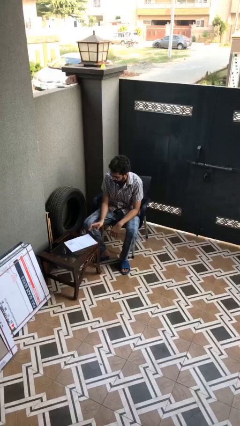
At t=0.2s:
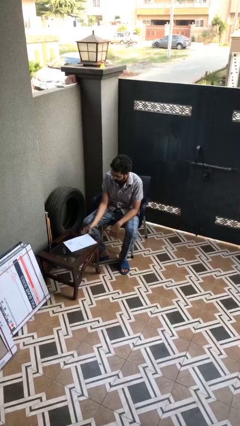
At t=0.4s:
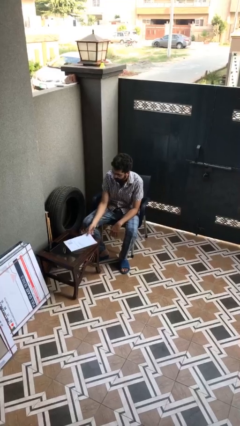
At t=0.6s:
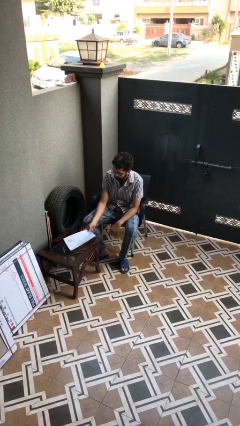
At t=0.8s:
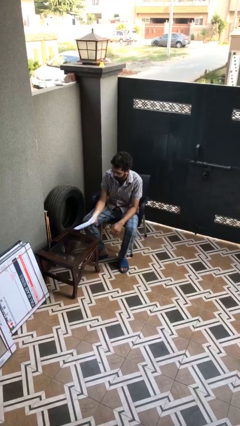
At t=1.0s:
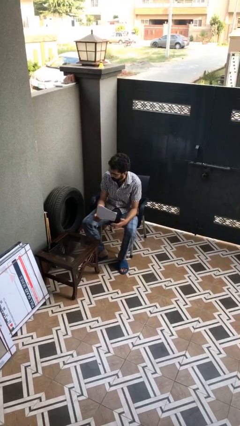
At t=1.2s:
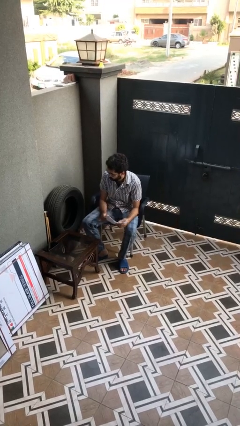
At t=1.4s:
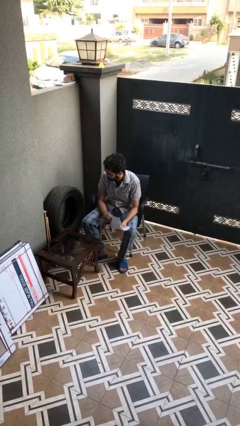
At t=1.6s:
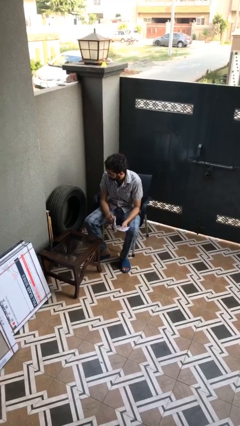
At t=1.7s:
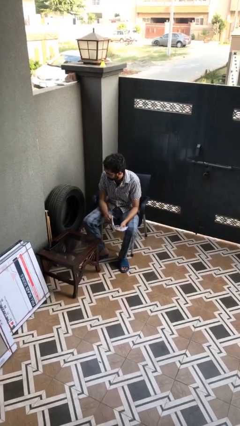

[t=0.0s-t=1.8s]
person picks up object from table

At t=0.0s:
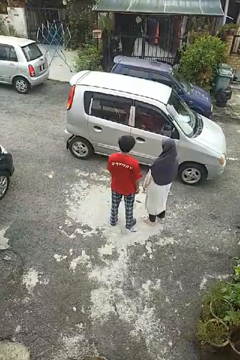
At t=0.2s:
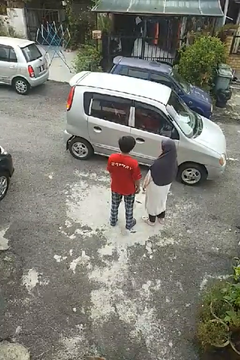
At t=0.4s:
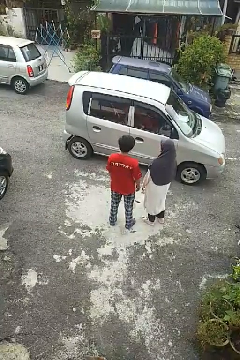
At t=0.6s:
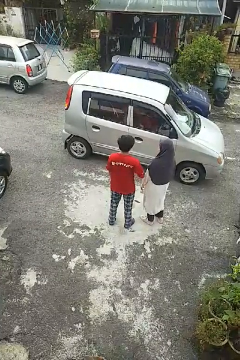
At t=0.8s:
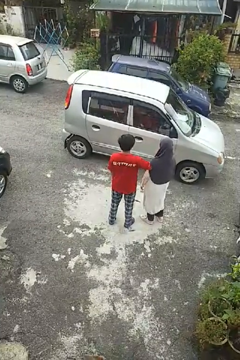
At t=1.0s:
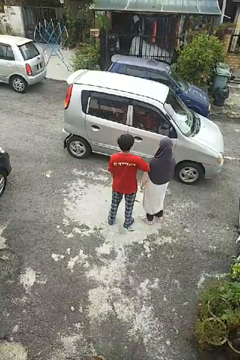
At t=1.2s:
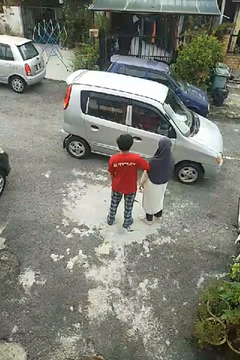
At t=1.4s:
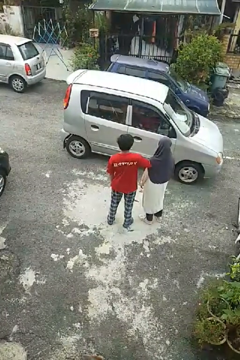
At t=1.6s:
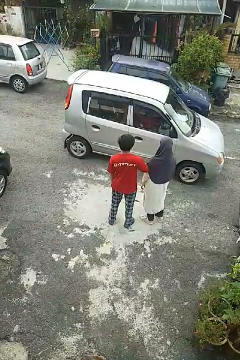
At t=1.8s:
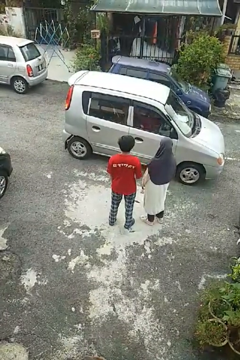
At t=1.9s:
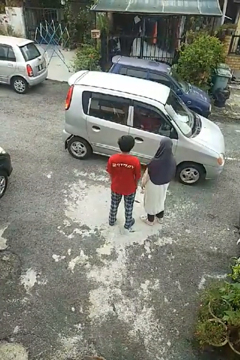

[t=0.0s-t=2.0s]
person nudges person with elbow

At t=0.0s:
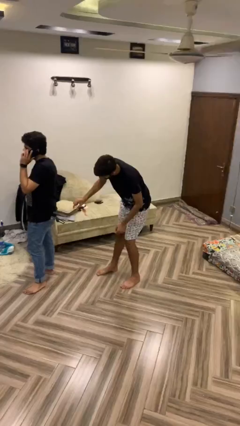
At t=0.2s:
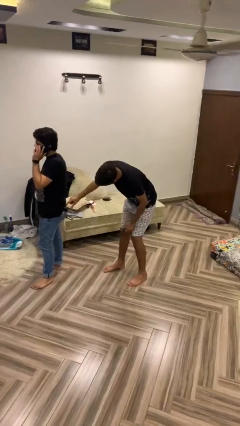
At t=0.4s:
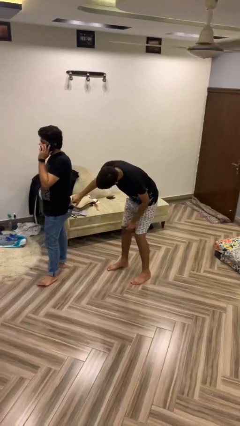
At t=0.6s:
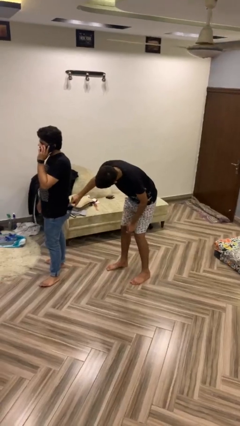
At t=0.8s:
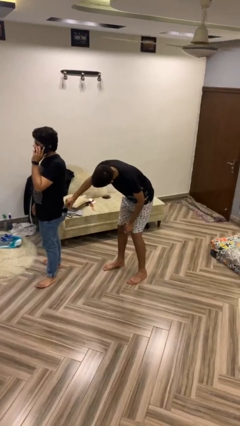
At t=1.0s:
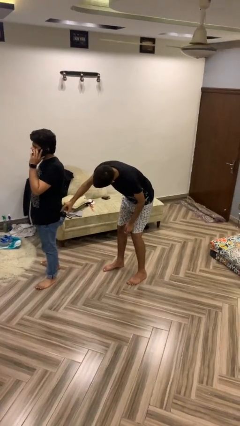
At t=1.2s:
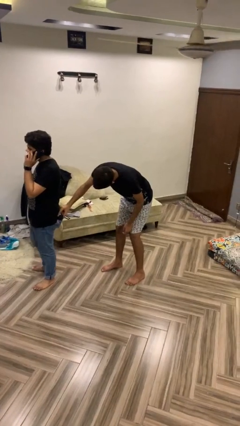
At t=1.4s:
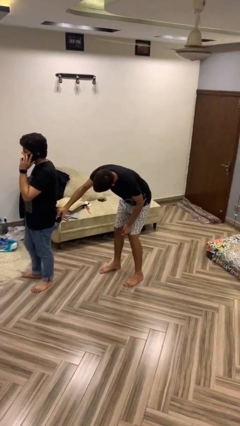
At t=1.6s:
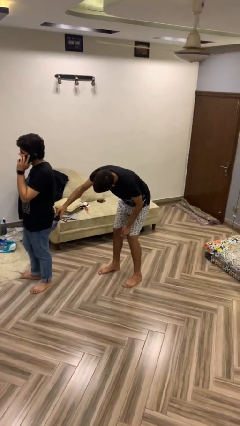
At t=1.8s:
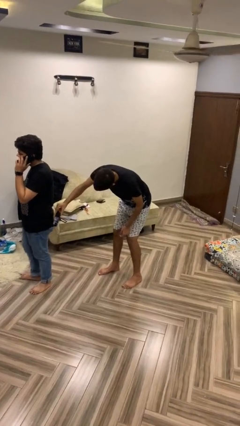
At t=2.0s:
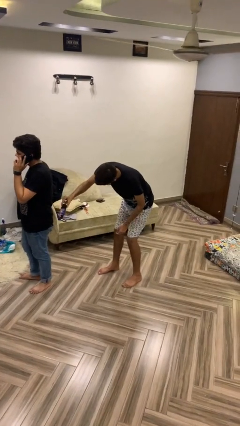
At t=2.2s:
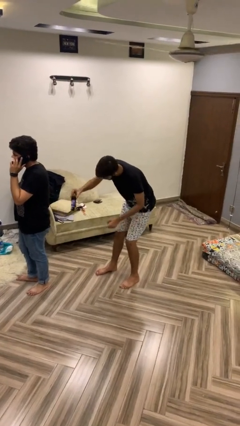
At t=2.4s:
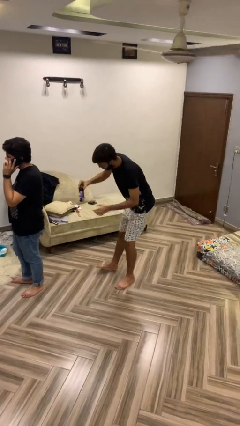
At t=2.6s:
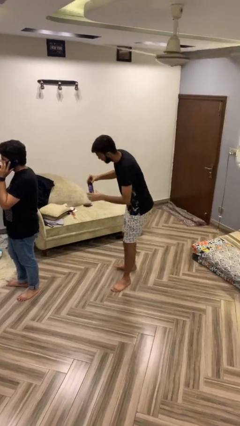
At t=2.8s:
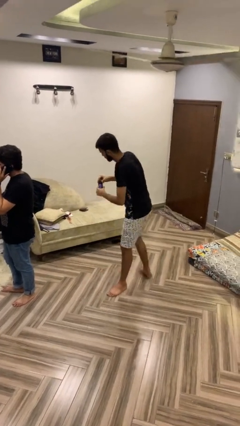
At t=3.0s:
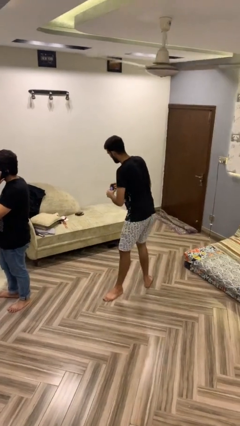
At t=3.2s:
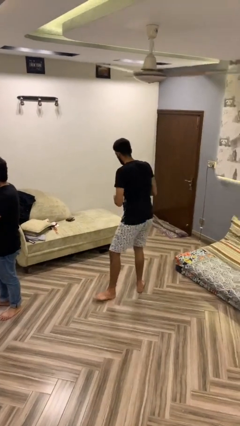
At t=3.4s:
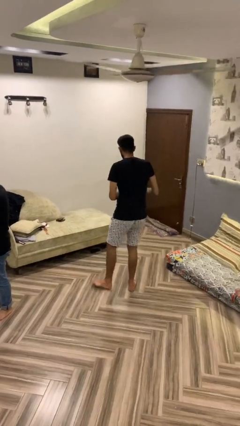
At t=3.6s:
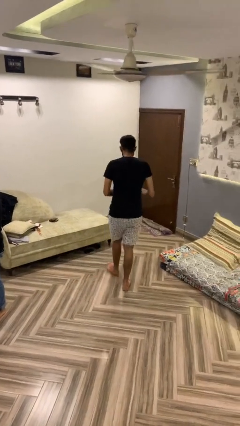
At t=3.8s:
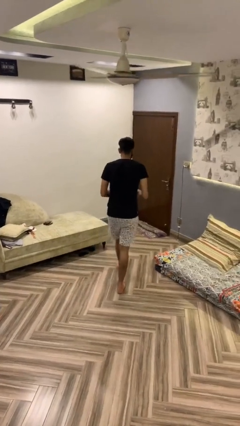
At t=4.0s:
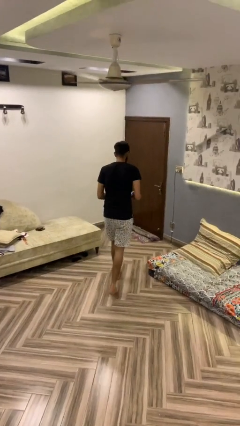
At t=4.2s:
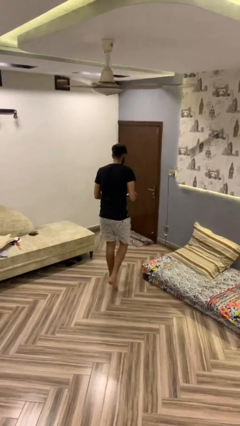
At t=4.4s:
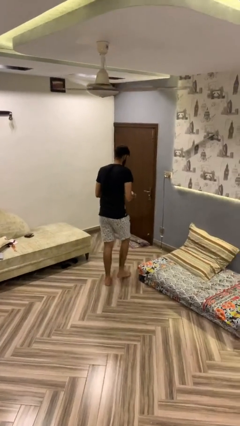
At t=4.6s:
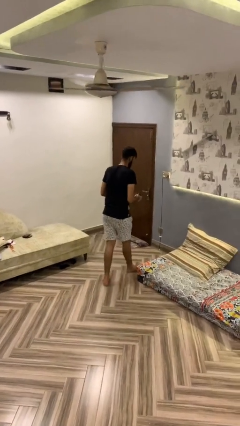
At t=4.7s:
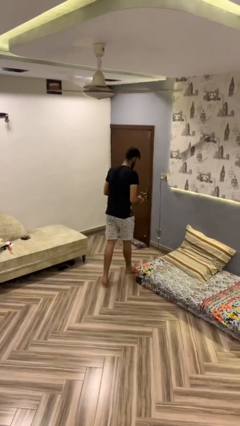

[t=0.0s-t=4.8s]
person steals object from person

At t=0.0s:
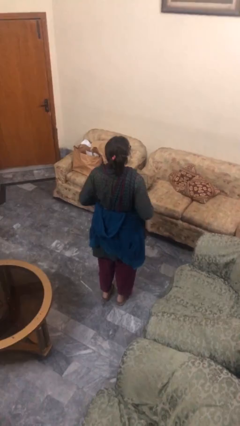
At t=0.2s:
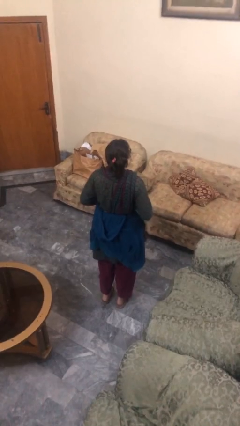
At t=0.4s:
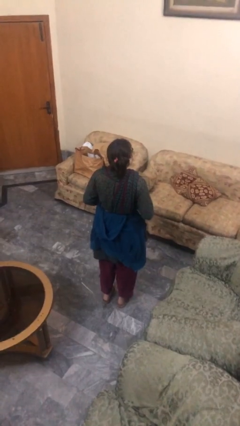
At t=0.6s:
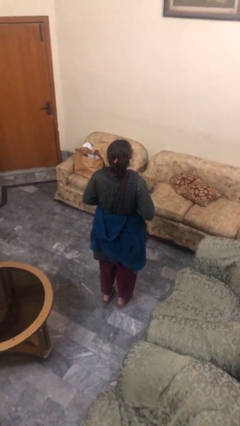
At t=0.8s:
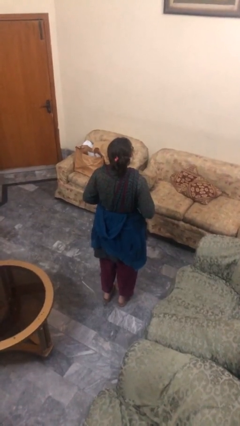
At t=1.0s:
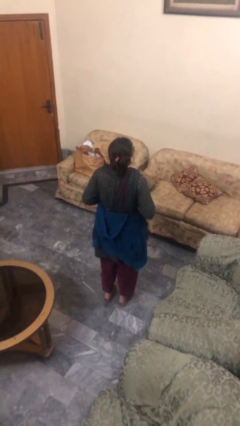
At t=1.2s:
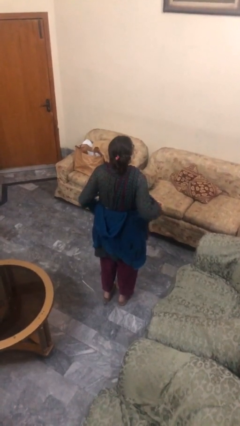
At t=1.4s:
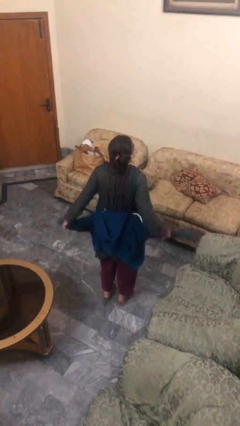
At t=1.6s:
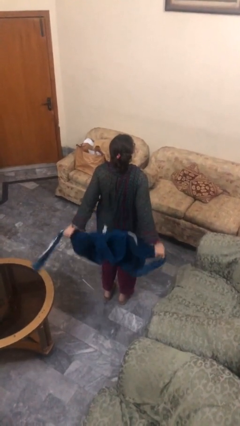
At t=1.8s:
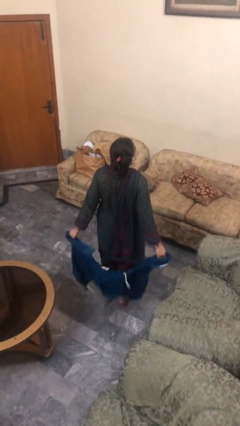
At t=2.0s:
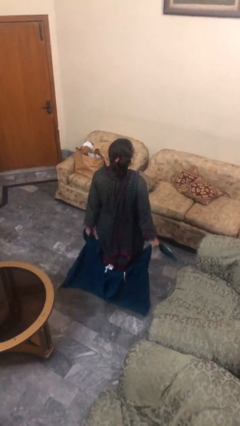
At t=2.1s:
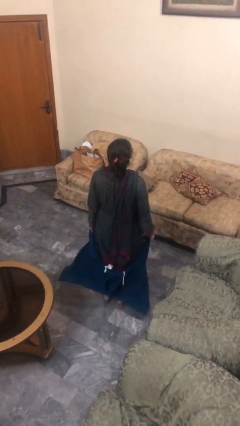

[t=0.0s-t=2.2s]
person unties jacket around waist

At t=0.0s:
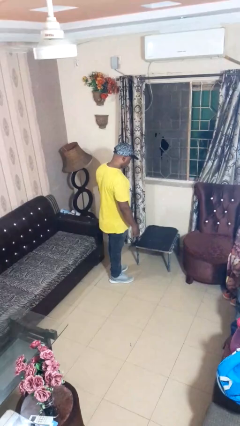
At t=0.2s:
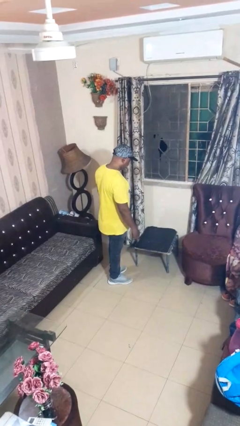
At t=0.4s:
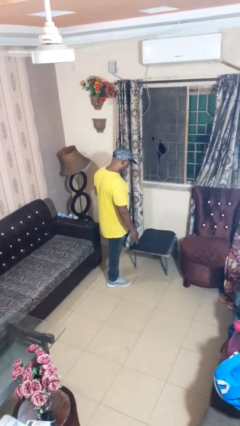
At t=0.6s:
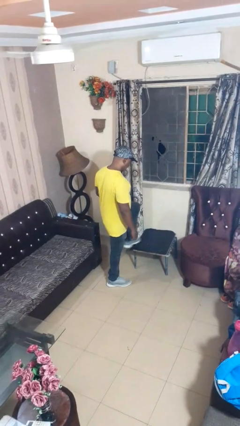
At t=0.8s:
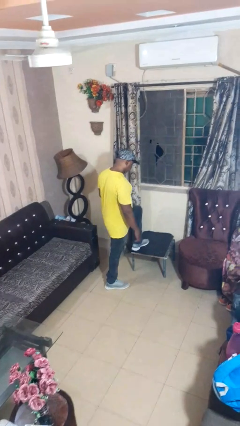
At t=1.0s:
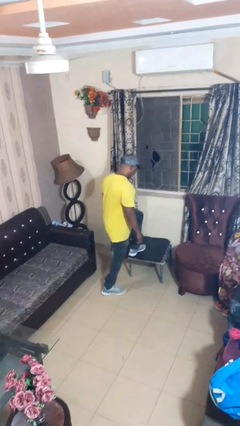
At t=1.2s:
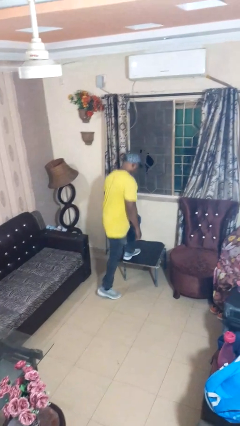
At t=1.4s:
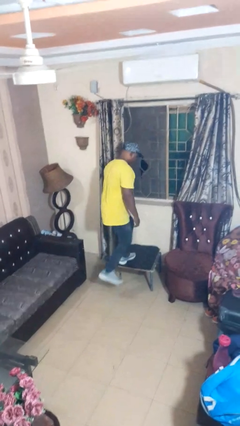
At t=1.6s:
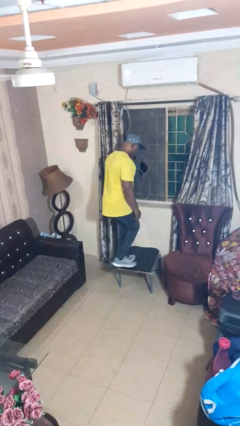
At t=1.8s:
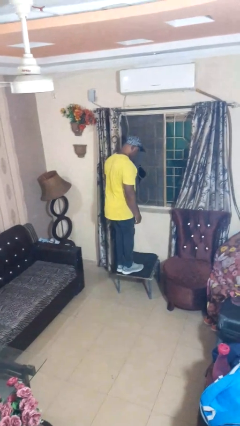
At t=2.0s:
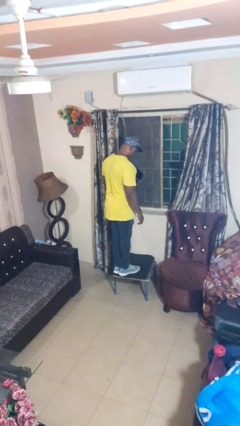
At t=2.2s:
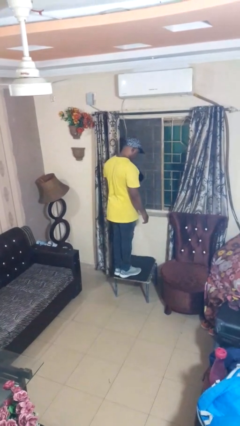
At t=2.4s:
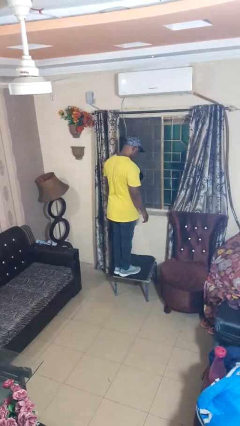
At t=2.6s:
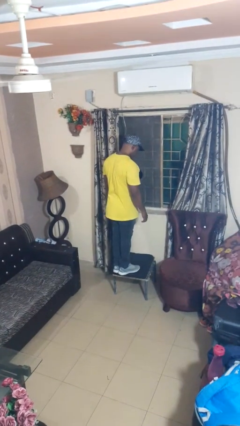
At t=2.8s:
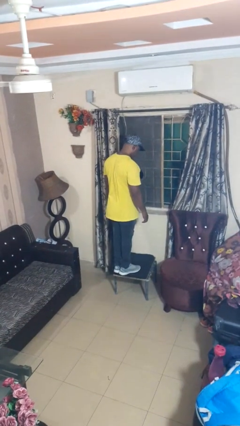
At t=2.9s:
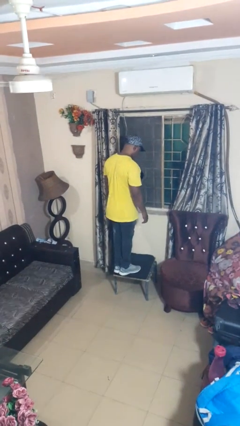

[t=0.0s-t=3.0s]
person climbs on table

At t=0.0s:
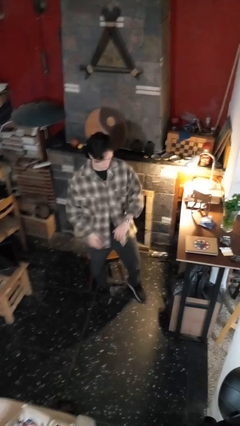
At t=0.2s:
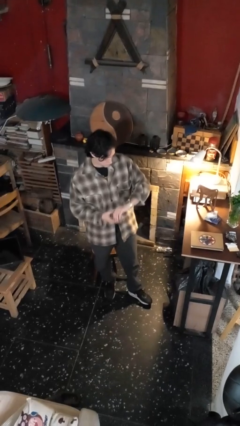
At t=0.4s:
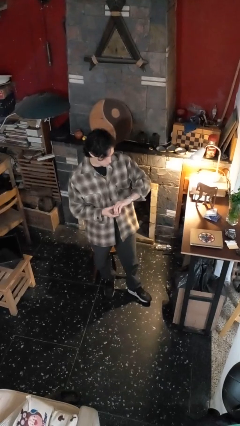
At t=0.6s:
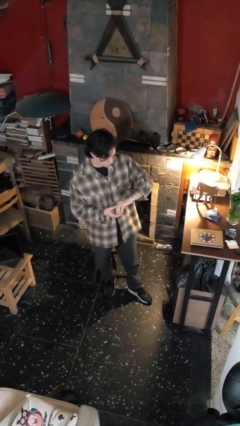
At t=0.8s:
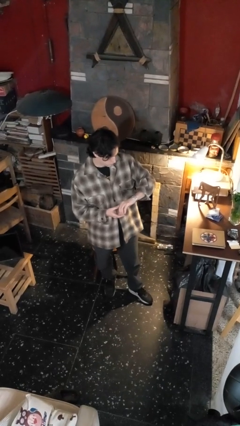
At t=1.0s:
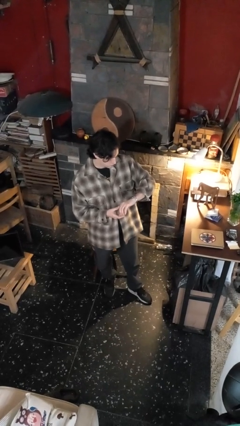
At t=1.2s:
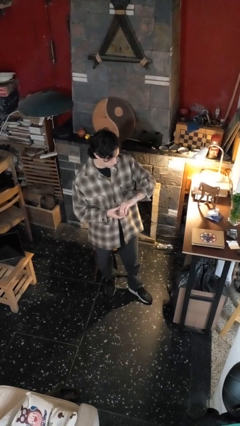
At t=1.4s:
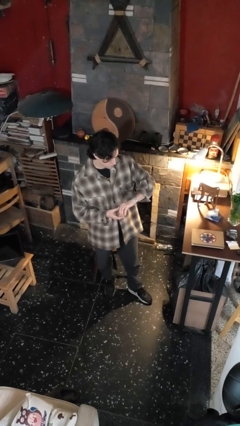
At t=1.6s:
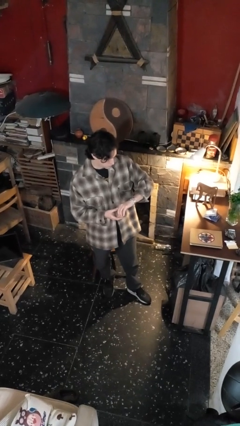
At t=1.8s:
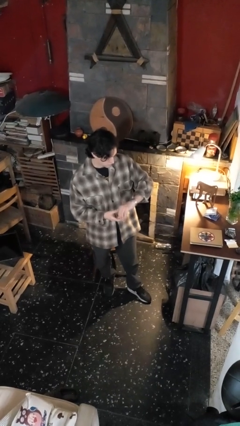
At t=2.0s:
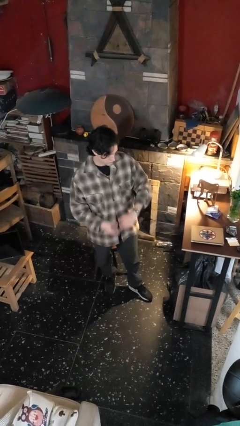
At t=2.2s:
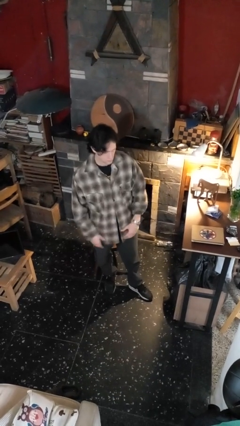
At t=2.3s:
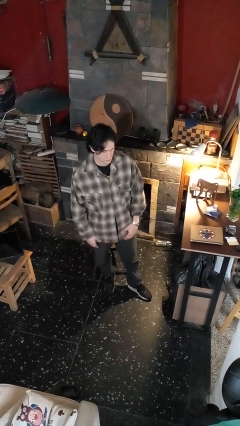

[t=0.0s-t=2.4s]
person looks at wristwatch

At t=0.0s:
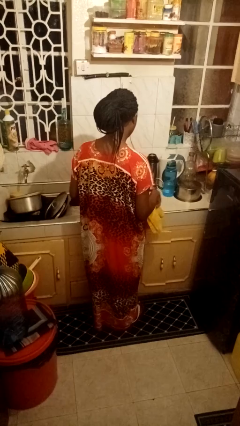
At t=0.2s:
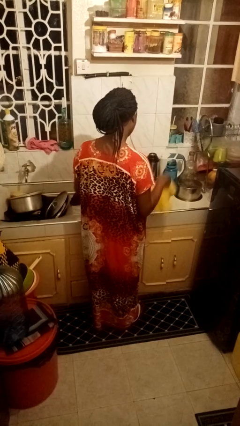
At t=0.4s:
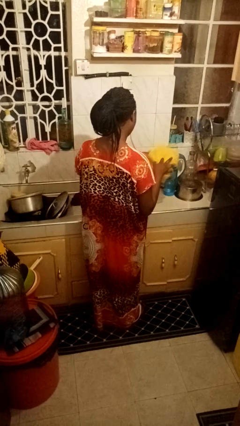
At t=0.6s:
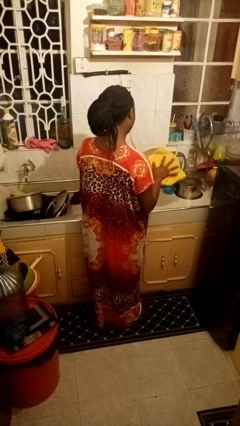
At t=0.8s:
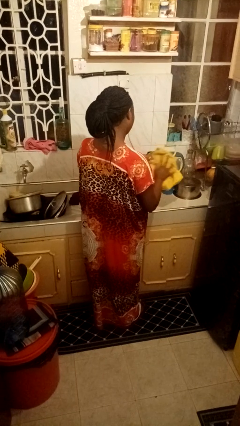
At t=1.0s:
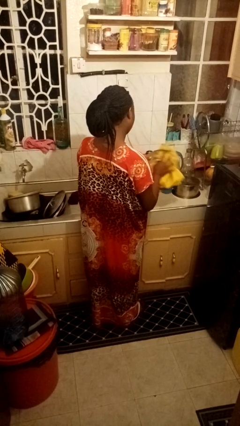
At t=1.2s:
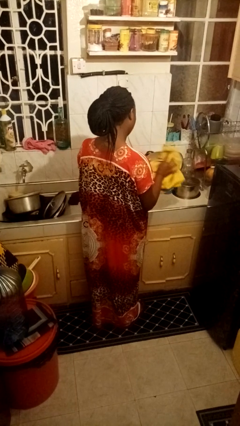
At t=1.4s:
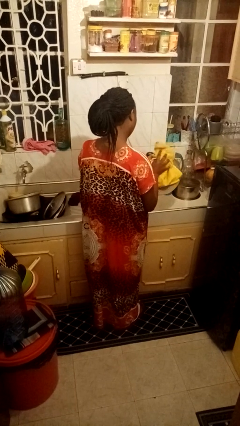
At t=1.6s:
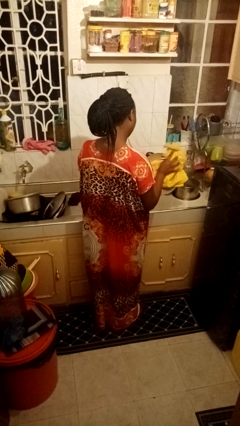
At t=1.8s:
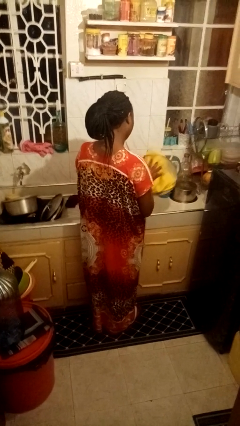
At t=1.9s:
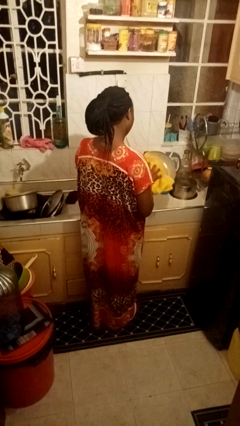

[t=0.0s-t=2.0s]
person dries dish
